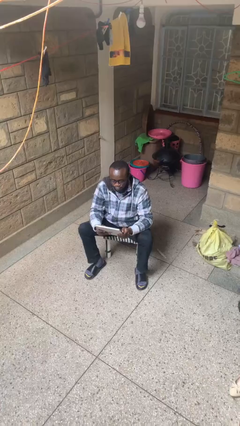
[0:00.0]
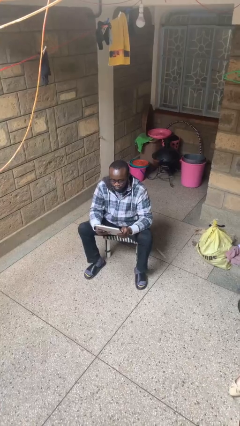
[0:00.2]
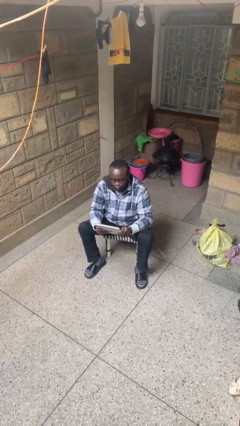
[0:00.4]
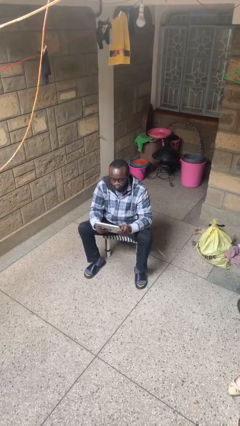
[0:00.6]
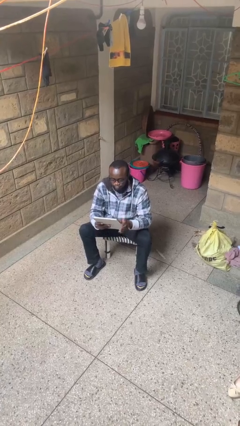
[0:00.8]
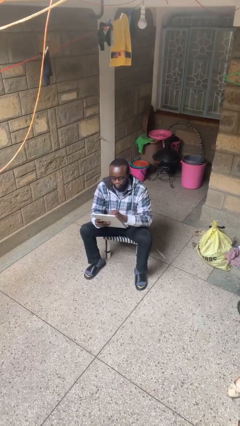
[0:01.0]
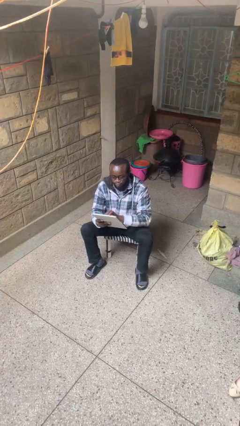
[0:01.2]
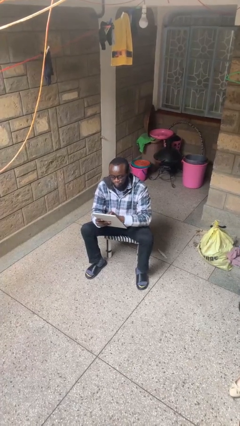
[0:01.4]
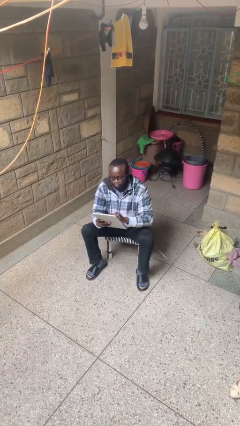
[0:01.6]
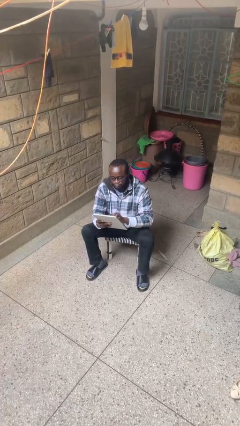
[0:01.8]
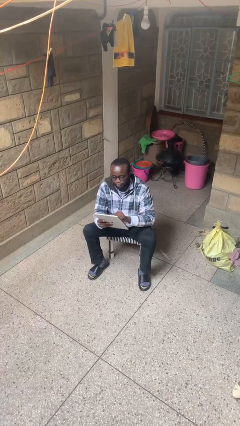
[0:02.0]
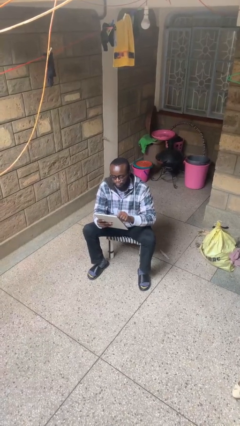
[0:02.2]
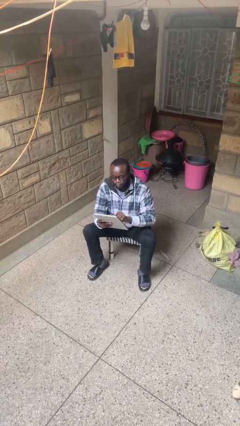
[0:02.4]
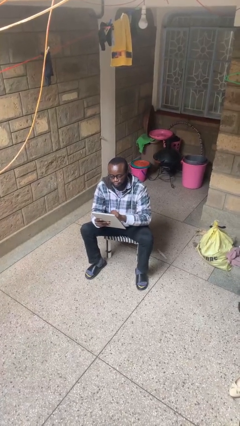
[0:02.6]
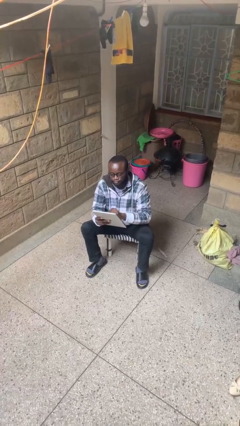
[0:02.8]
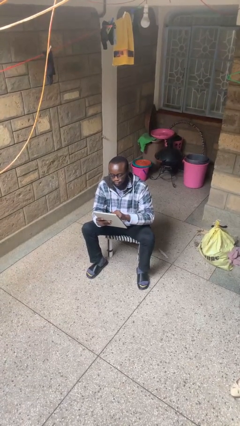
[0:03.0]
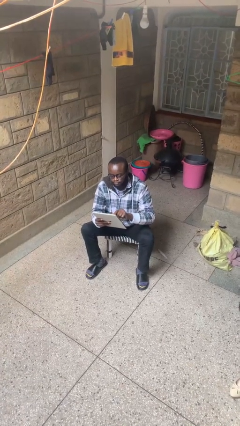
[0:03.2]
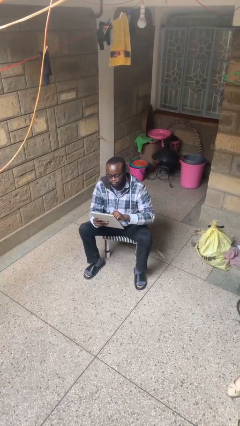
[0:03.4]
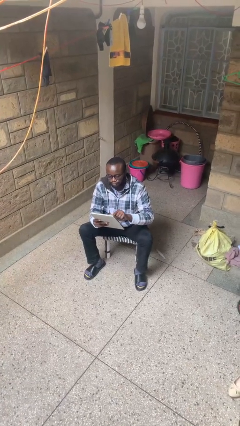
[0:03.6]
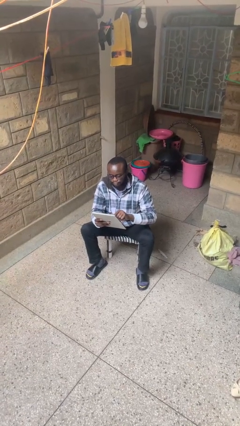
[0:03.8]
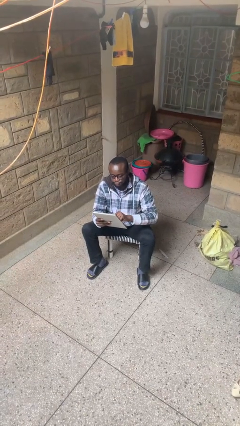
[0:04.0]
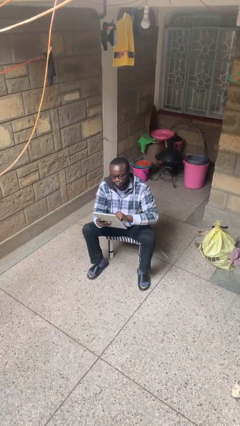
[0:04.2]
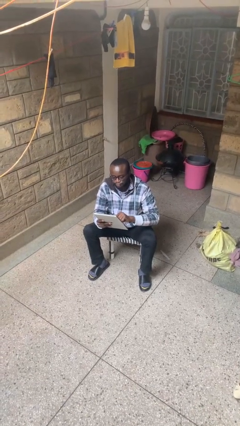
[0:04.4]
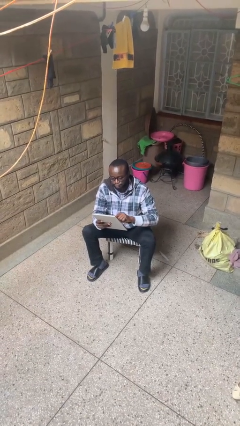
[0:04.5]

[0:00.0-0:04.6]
person interacts with tablet

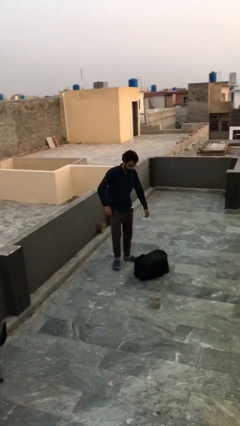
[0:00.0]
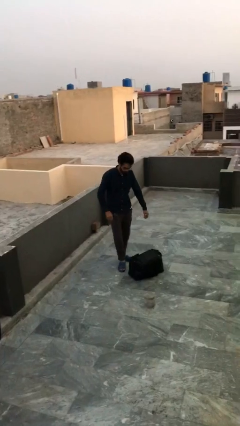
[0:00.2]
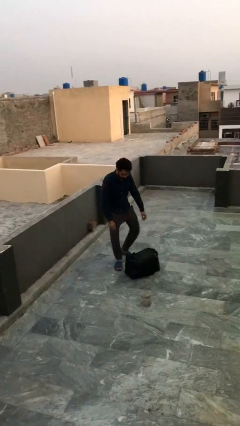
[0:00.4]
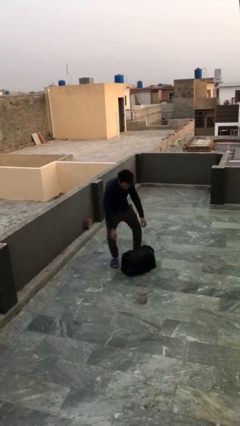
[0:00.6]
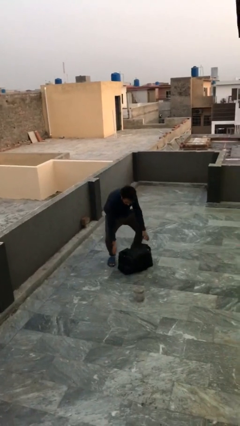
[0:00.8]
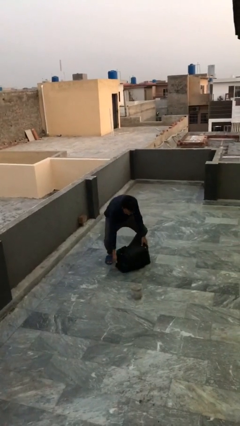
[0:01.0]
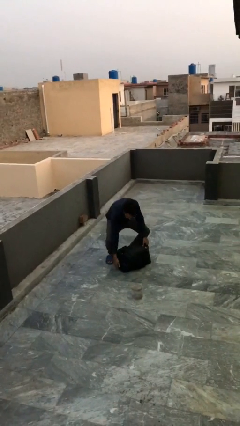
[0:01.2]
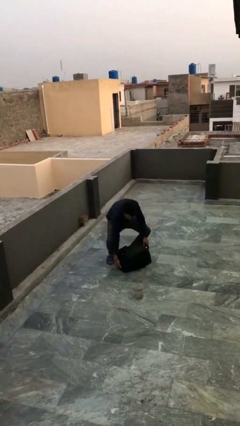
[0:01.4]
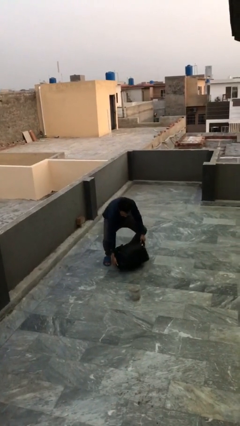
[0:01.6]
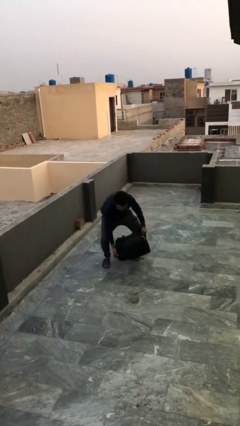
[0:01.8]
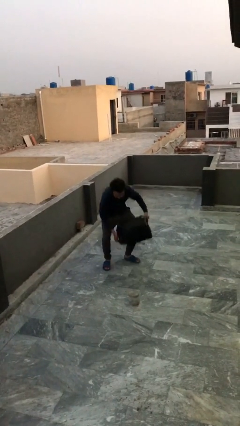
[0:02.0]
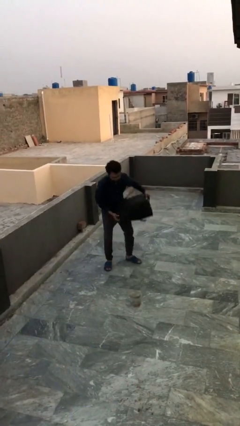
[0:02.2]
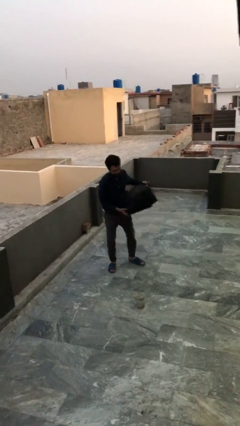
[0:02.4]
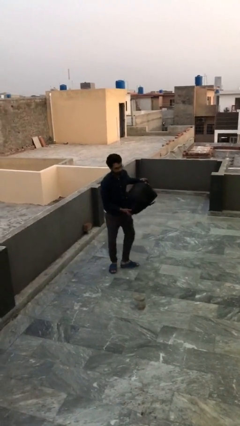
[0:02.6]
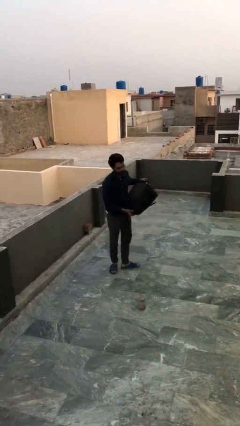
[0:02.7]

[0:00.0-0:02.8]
person picks up object from floor

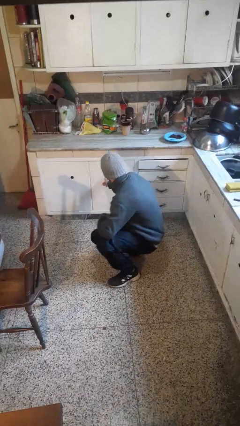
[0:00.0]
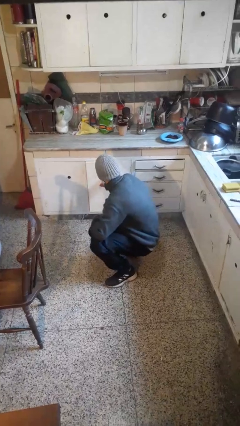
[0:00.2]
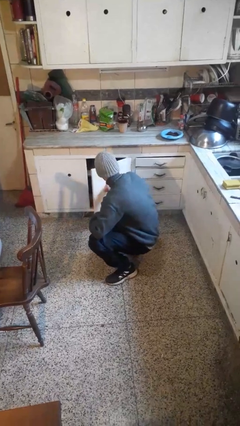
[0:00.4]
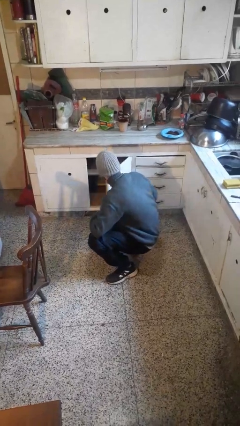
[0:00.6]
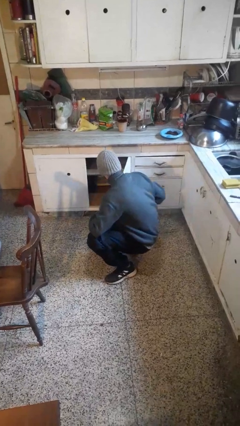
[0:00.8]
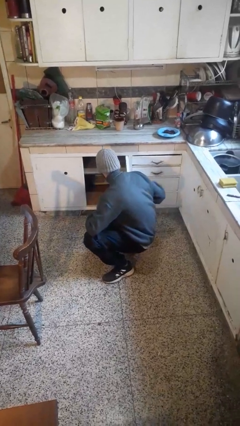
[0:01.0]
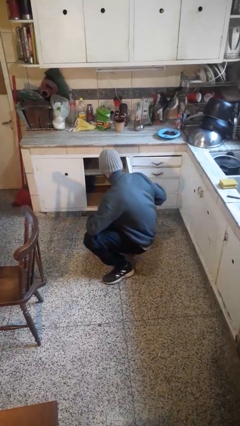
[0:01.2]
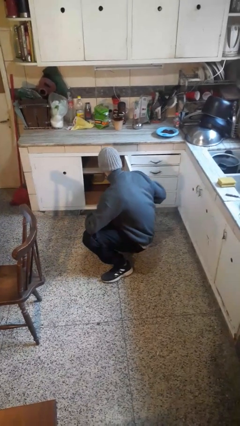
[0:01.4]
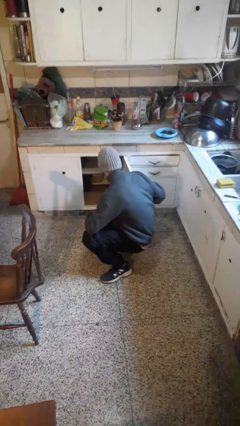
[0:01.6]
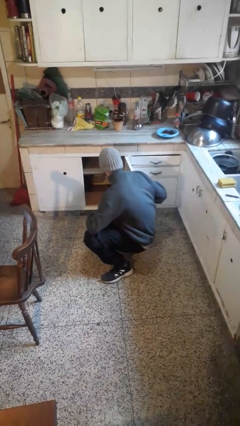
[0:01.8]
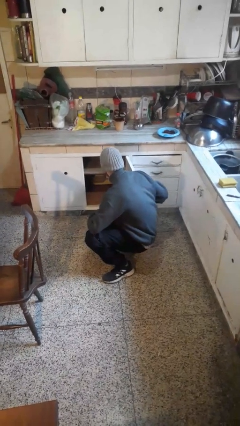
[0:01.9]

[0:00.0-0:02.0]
person opens cabinet

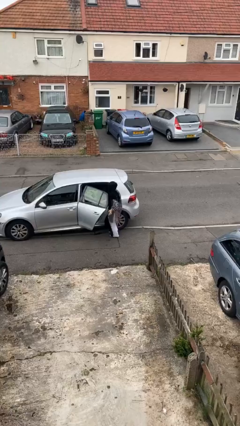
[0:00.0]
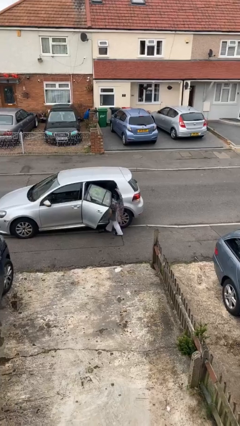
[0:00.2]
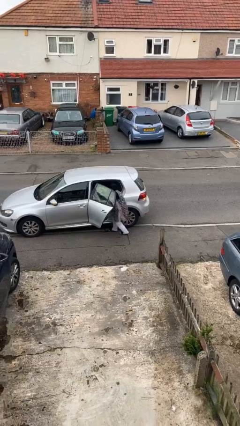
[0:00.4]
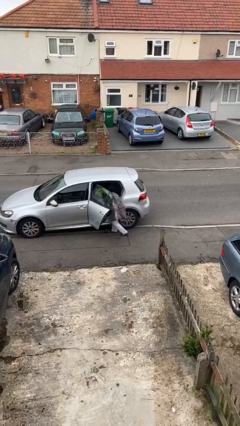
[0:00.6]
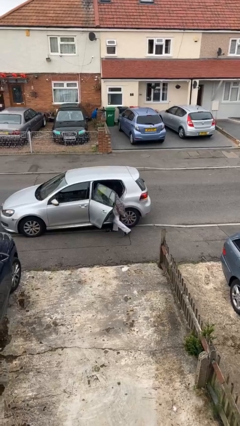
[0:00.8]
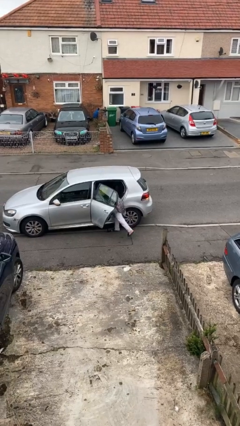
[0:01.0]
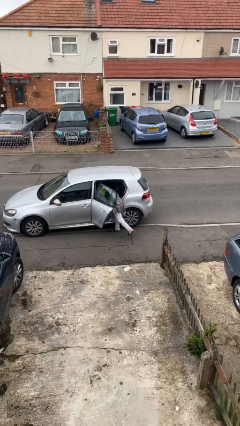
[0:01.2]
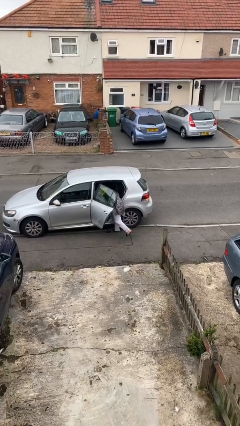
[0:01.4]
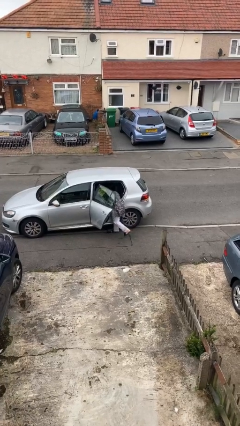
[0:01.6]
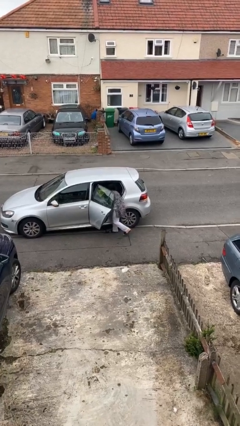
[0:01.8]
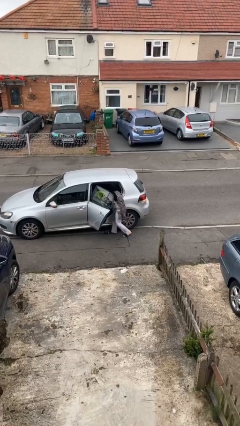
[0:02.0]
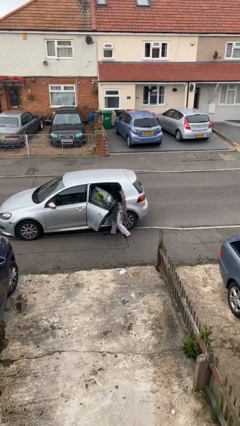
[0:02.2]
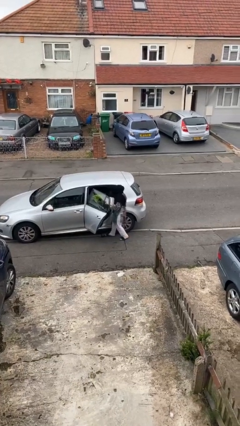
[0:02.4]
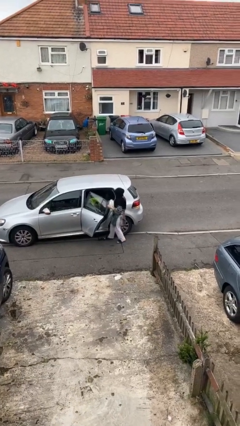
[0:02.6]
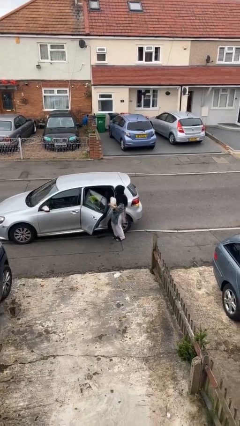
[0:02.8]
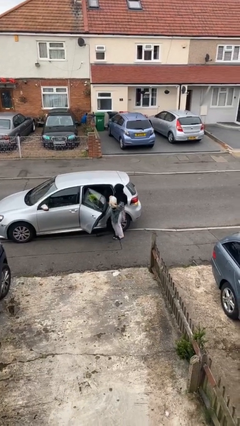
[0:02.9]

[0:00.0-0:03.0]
person unloads car

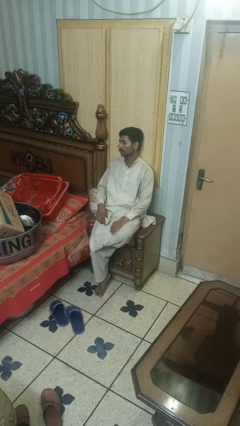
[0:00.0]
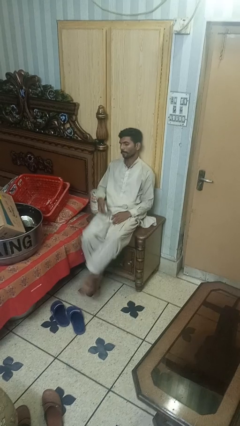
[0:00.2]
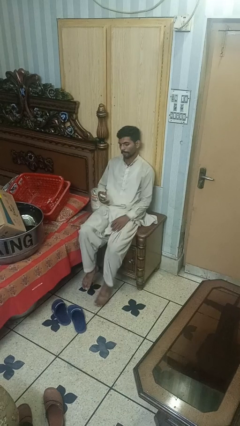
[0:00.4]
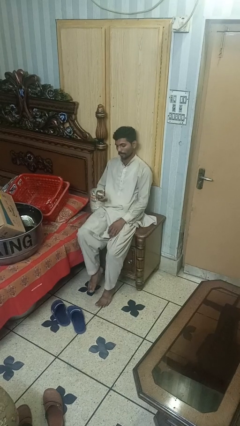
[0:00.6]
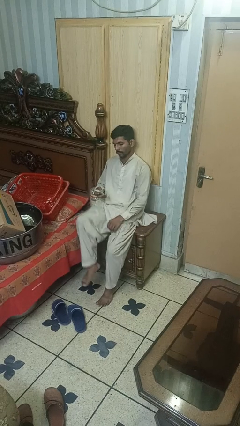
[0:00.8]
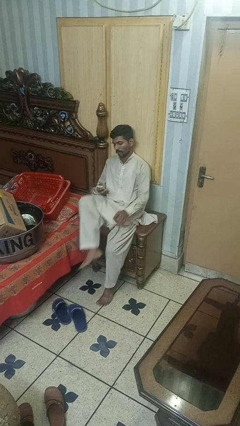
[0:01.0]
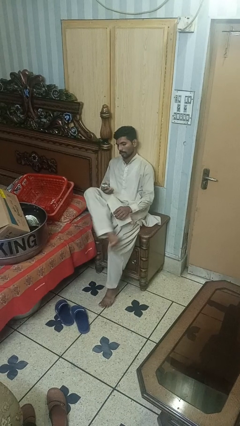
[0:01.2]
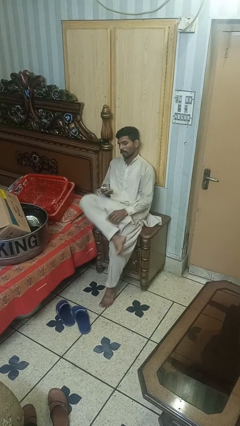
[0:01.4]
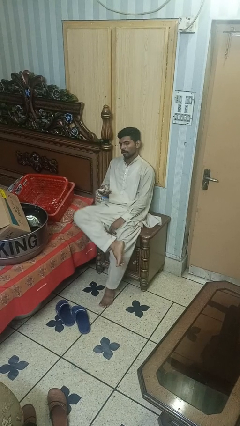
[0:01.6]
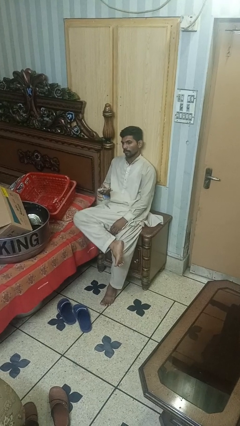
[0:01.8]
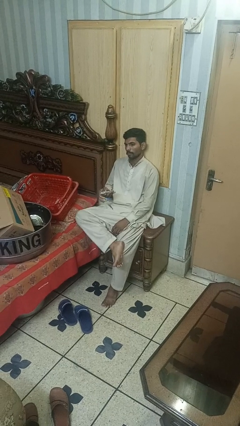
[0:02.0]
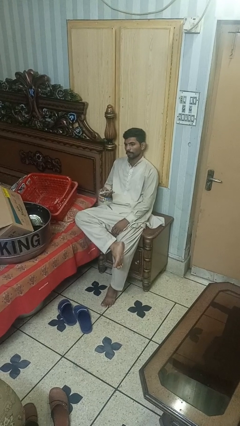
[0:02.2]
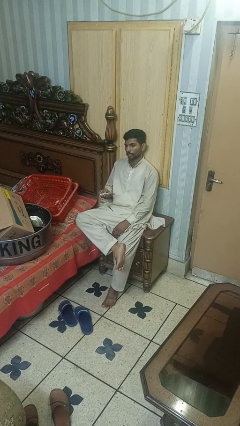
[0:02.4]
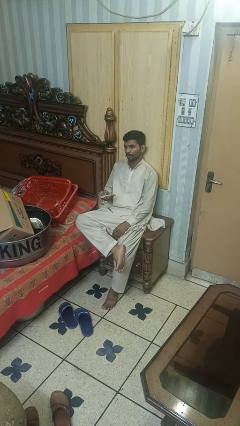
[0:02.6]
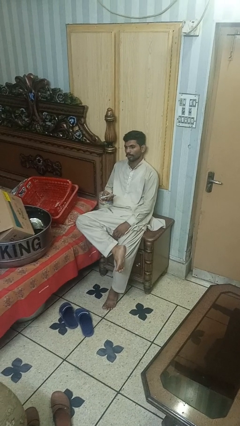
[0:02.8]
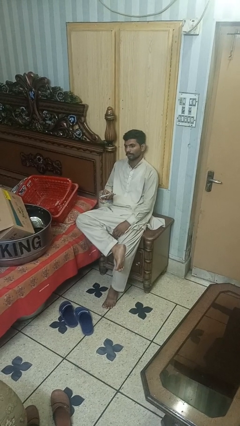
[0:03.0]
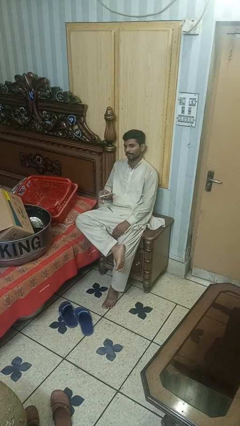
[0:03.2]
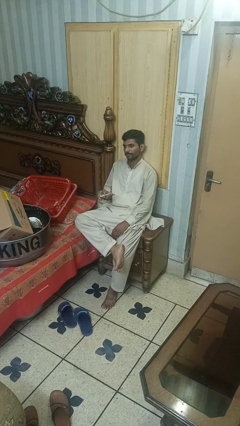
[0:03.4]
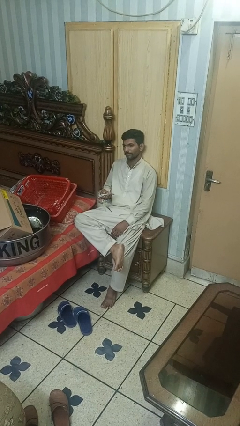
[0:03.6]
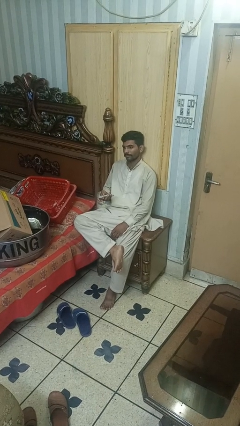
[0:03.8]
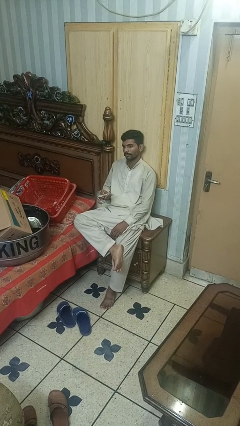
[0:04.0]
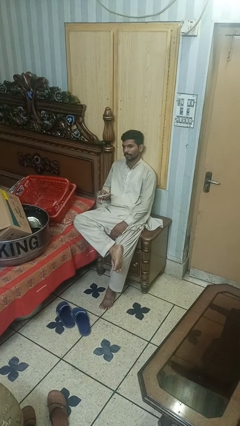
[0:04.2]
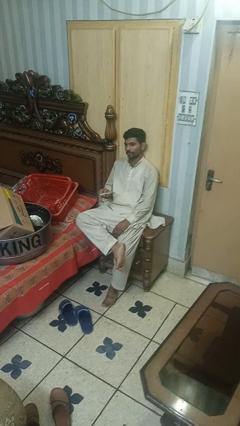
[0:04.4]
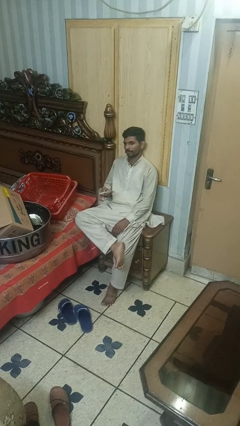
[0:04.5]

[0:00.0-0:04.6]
person uses television remote

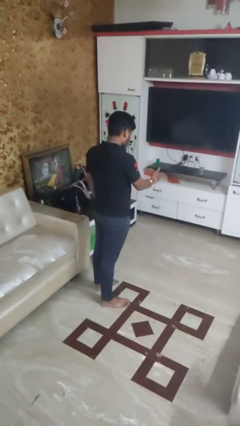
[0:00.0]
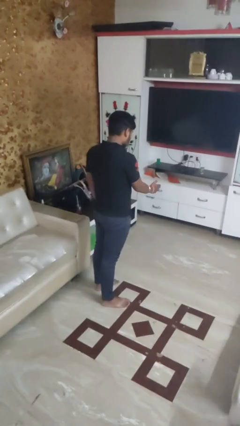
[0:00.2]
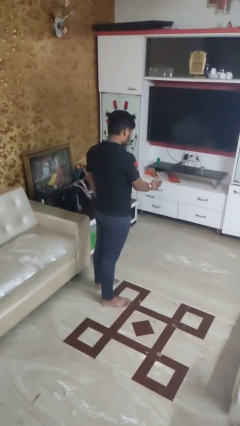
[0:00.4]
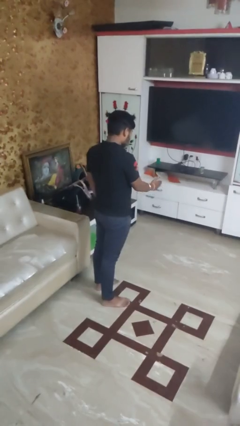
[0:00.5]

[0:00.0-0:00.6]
person karate chop
